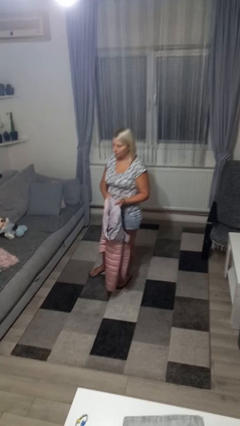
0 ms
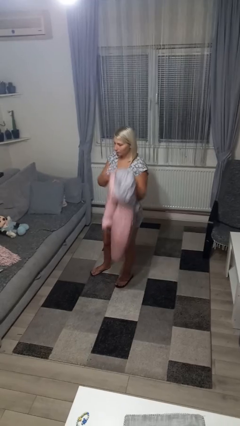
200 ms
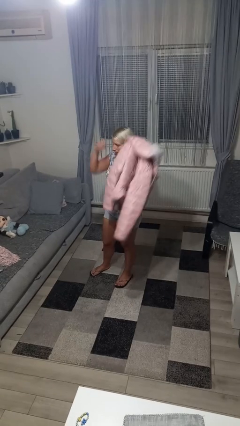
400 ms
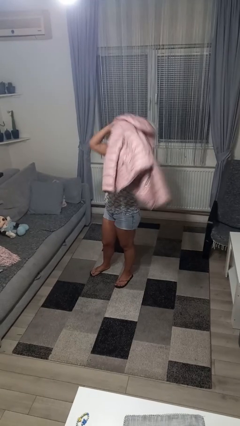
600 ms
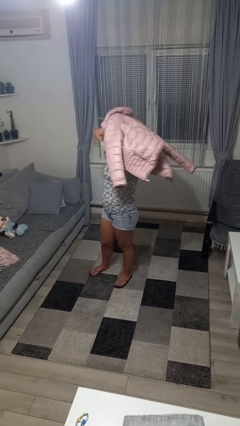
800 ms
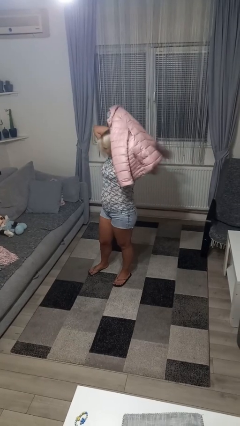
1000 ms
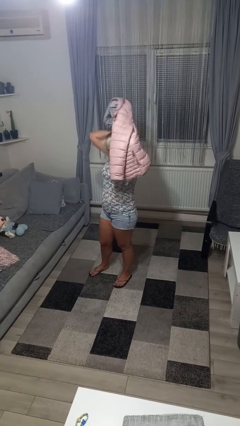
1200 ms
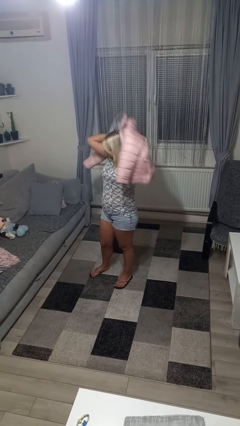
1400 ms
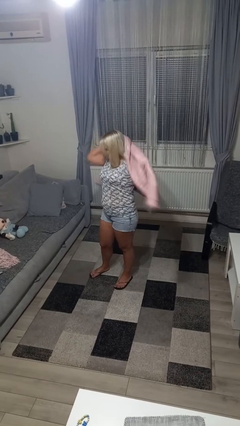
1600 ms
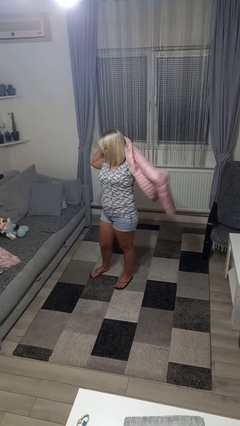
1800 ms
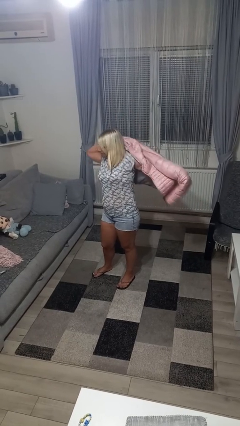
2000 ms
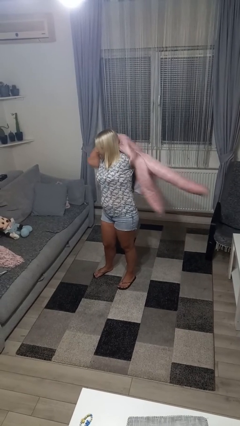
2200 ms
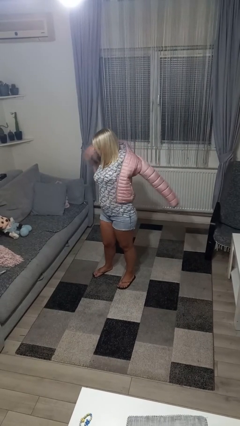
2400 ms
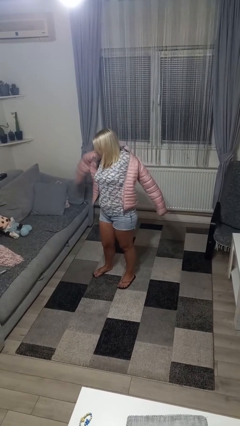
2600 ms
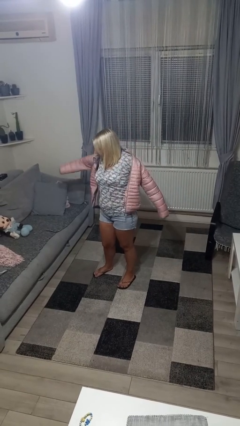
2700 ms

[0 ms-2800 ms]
person puts on jacket

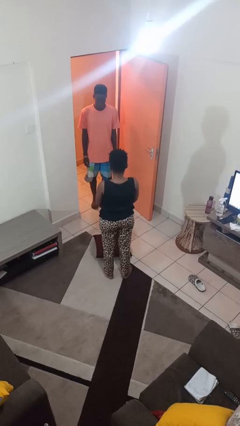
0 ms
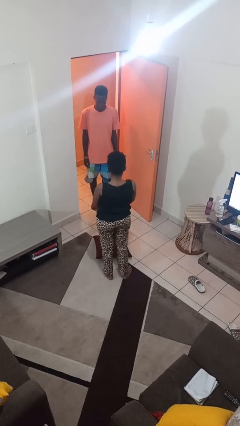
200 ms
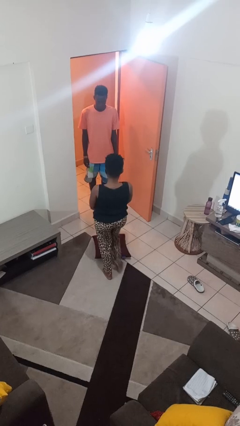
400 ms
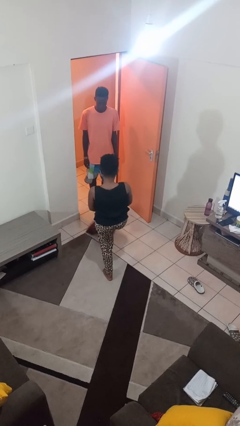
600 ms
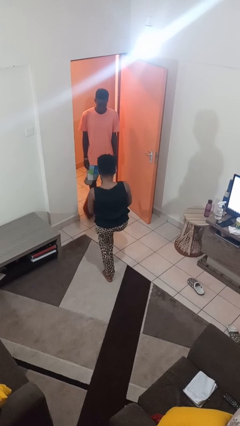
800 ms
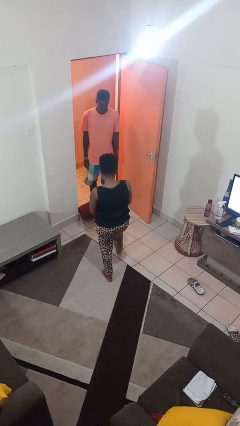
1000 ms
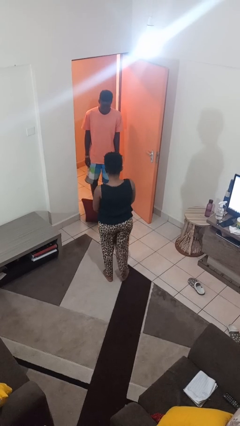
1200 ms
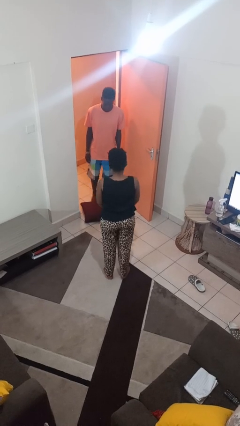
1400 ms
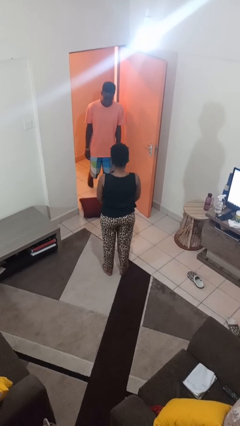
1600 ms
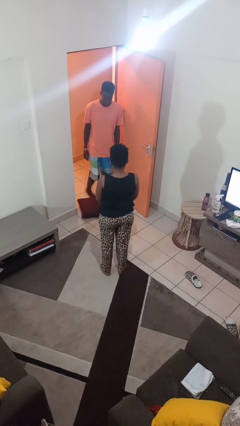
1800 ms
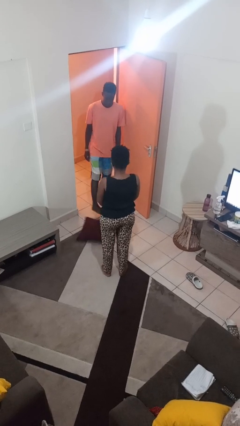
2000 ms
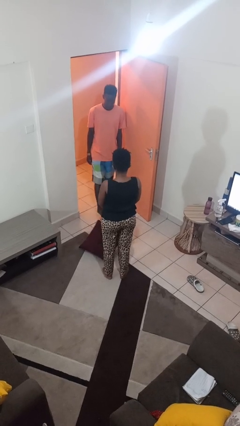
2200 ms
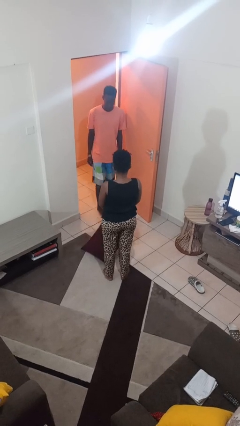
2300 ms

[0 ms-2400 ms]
person kicks object to person

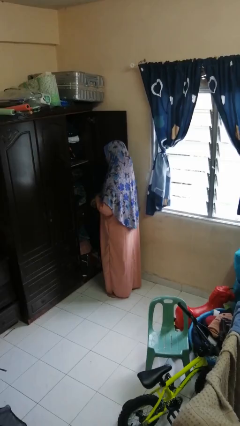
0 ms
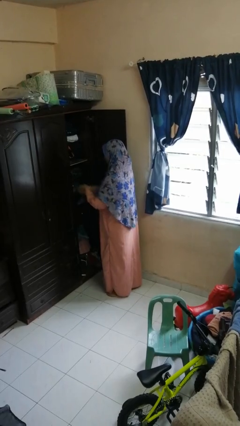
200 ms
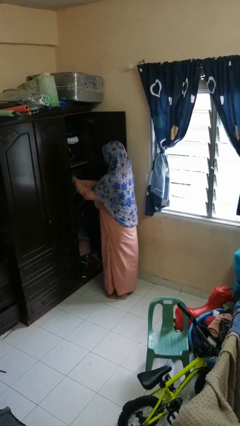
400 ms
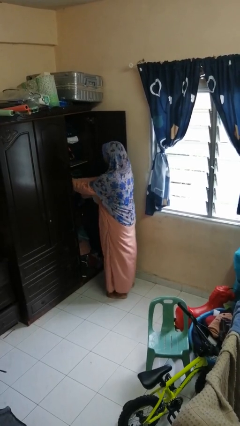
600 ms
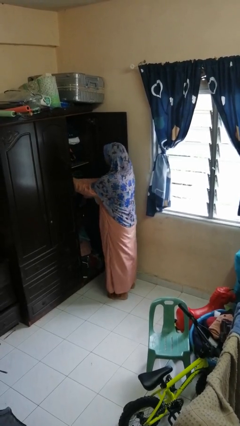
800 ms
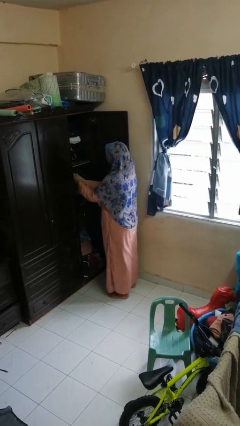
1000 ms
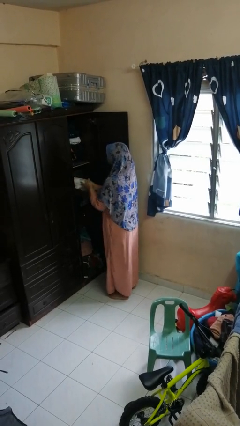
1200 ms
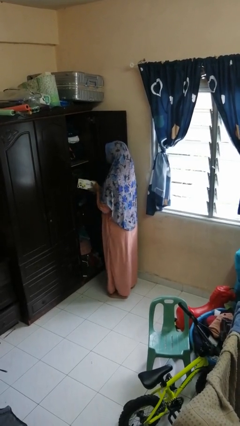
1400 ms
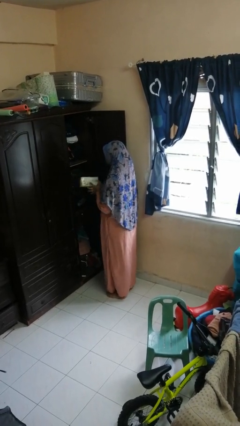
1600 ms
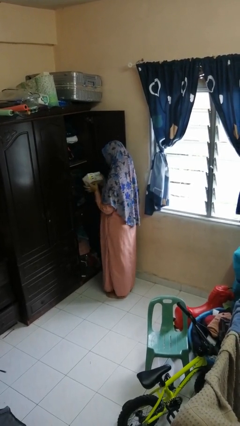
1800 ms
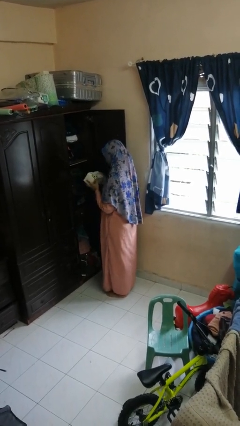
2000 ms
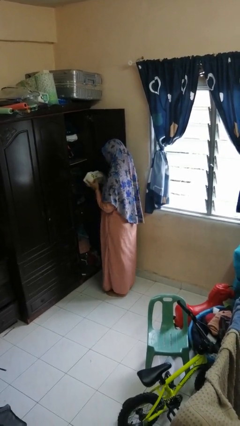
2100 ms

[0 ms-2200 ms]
person picks up object from cabinet

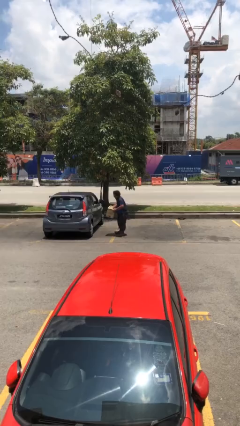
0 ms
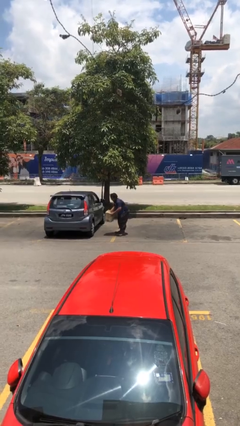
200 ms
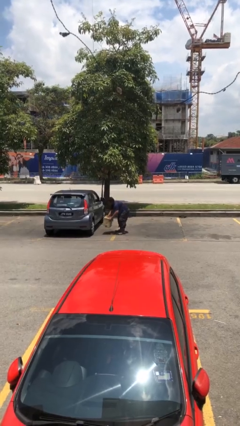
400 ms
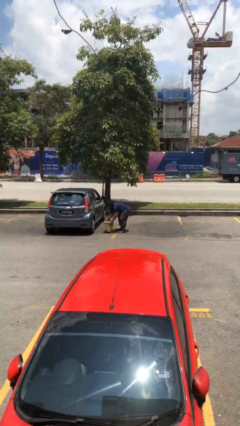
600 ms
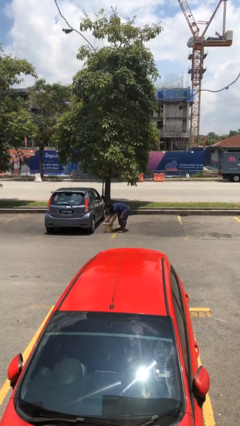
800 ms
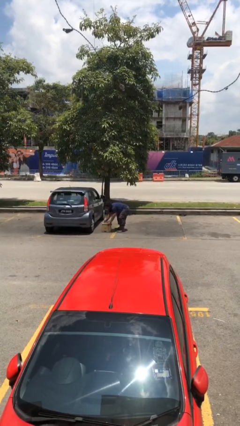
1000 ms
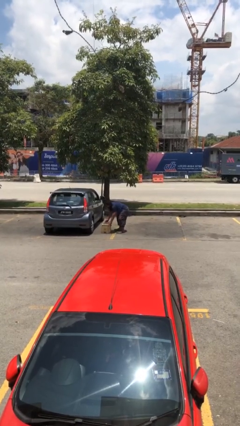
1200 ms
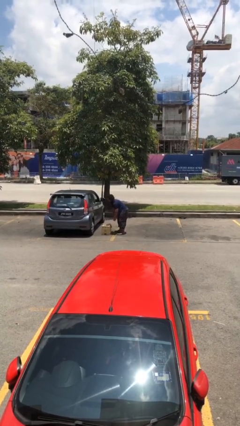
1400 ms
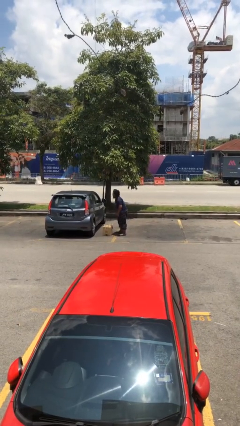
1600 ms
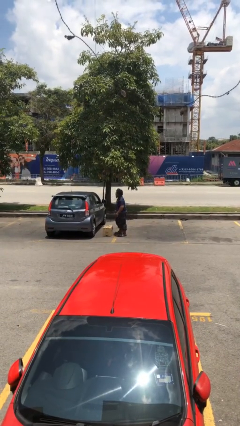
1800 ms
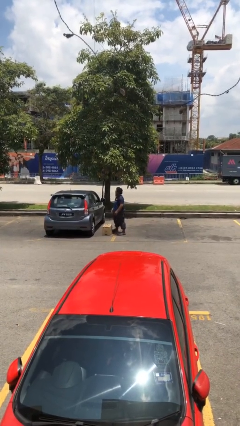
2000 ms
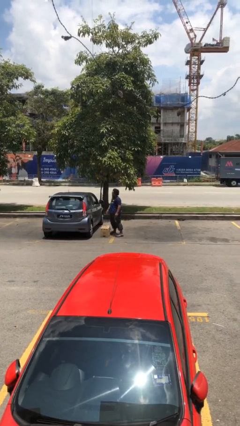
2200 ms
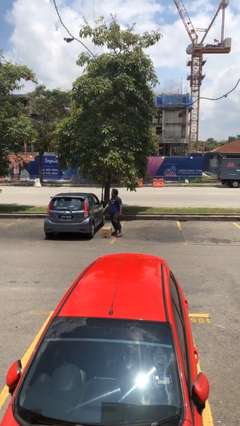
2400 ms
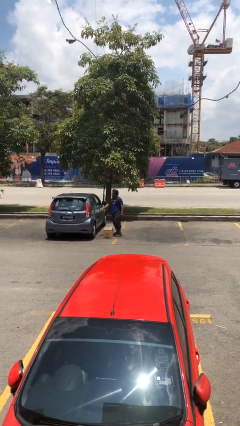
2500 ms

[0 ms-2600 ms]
person puts down object on floor

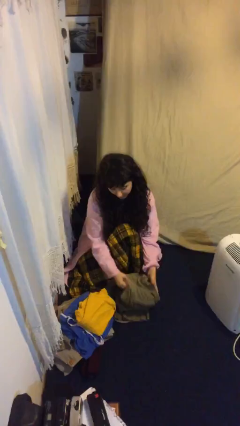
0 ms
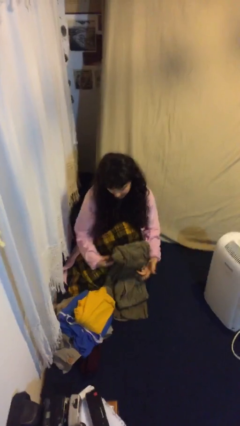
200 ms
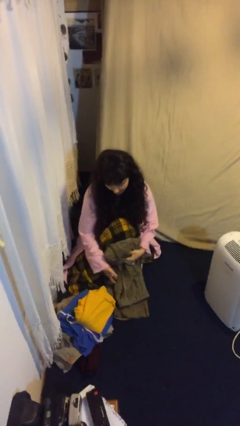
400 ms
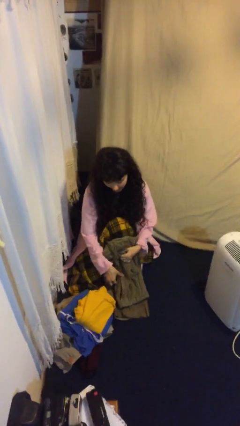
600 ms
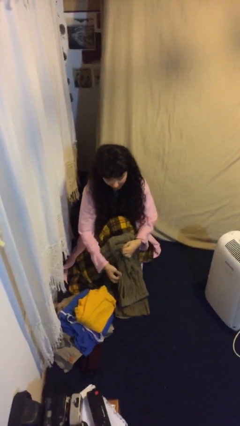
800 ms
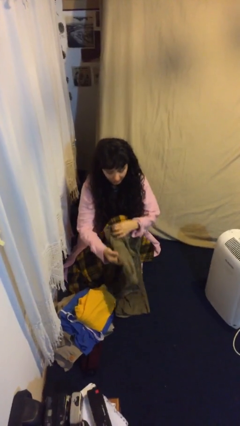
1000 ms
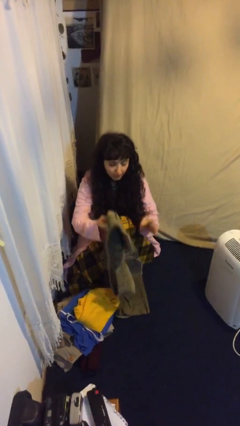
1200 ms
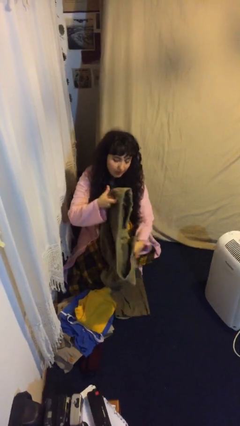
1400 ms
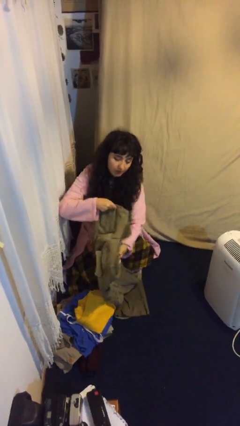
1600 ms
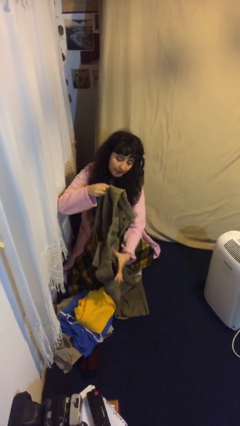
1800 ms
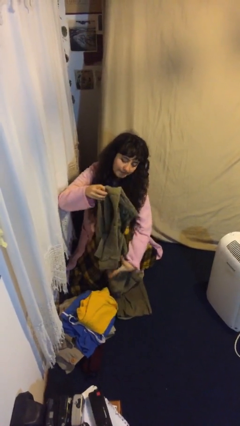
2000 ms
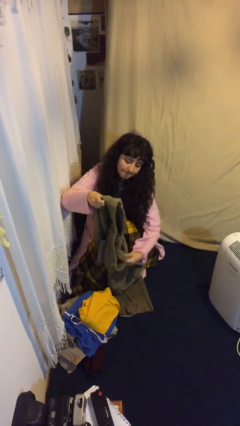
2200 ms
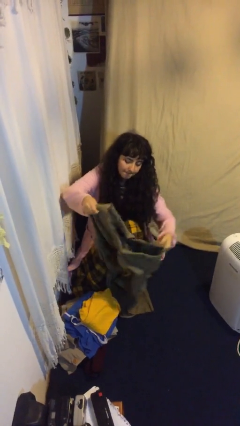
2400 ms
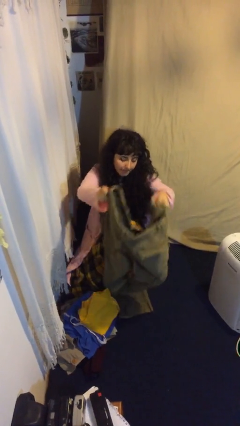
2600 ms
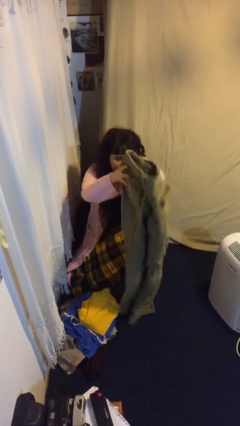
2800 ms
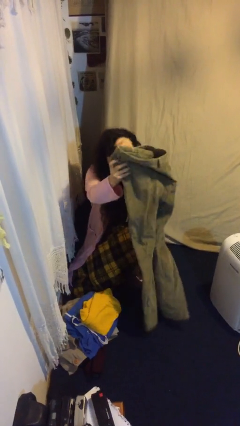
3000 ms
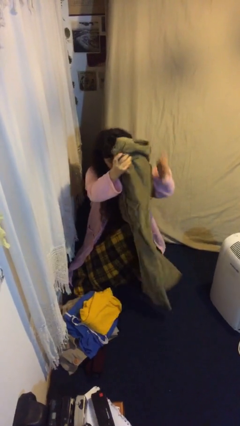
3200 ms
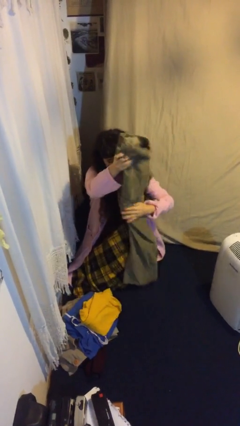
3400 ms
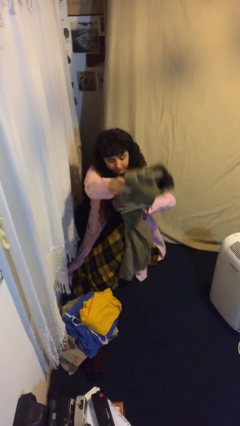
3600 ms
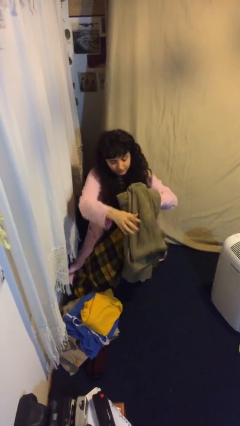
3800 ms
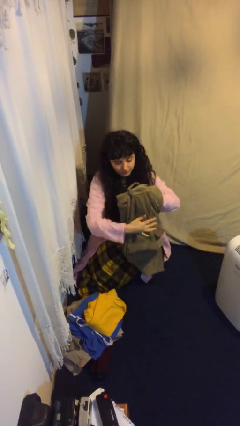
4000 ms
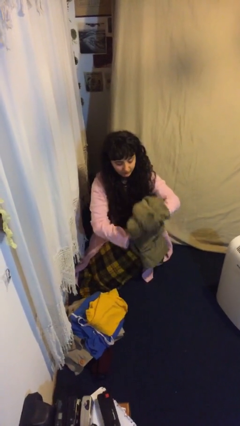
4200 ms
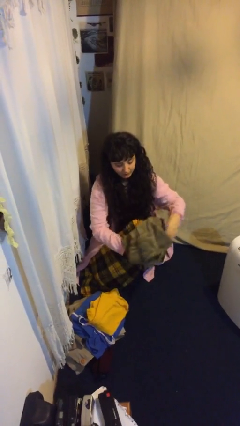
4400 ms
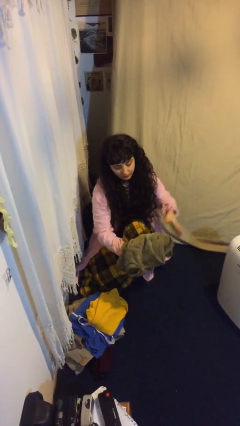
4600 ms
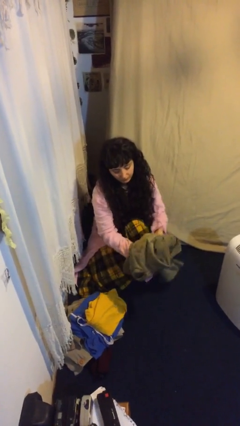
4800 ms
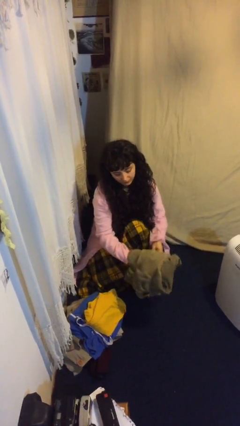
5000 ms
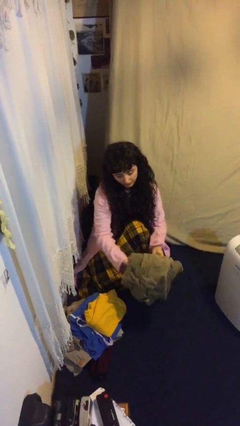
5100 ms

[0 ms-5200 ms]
person folds pants

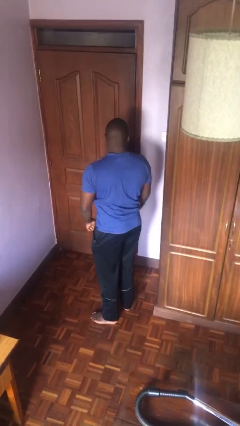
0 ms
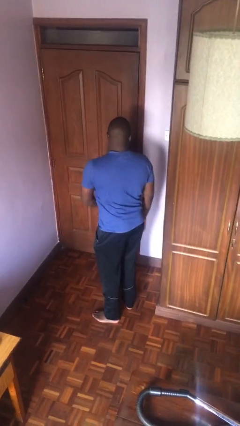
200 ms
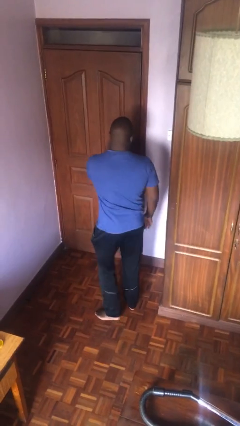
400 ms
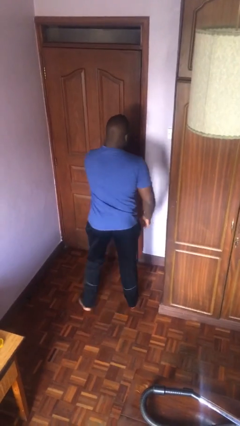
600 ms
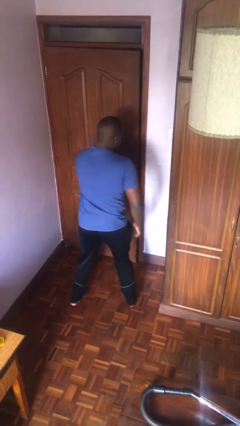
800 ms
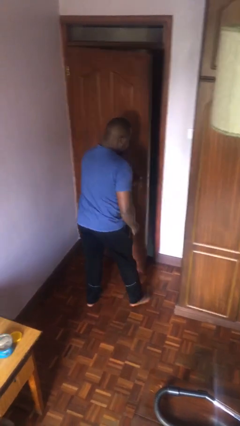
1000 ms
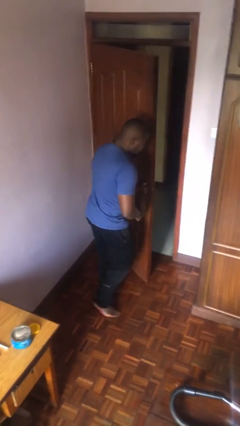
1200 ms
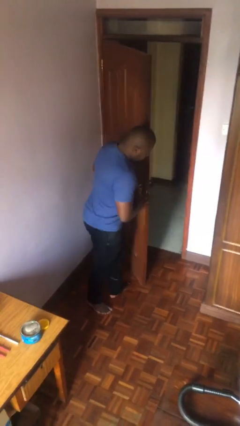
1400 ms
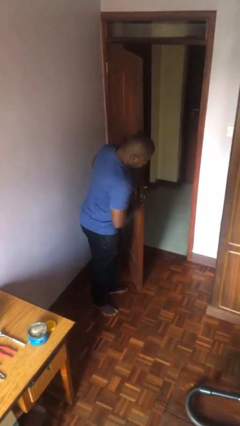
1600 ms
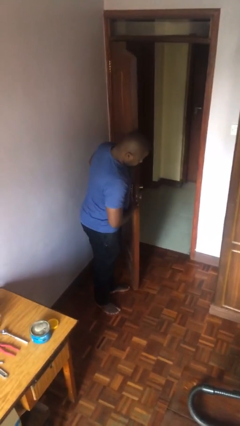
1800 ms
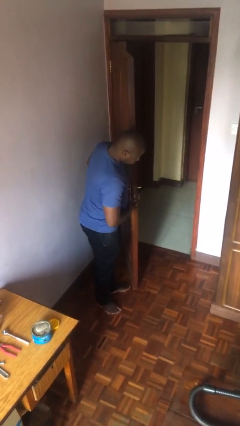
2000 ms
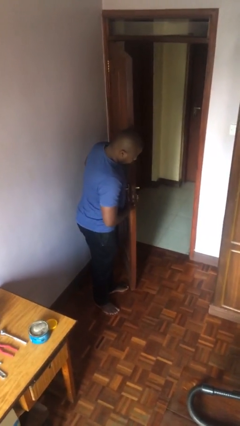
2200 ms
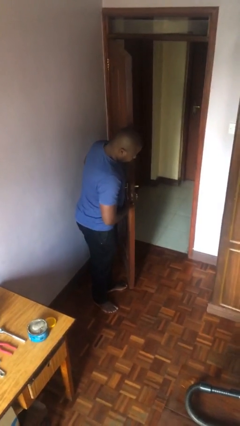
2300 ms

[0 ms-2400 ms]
person opens facility door
